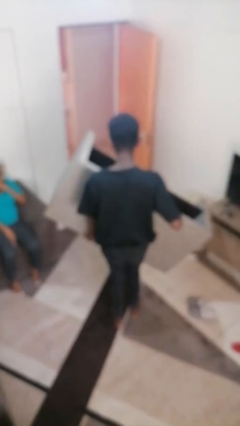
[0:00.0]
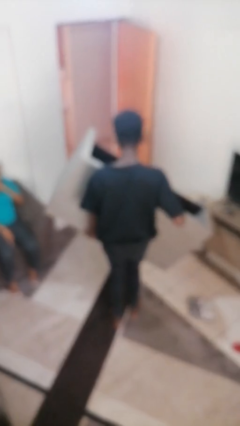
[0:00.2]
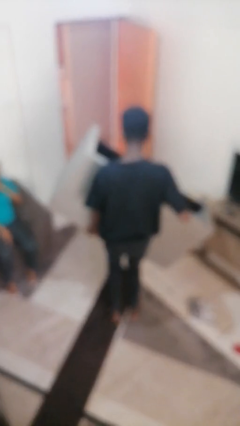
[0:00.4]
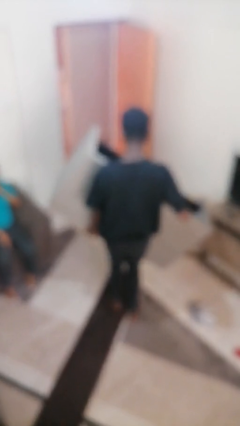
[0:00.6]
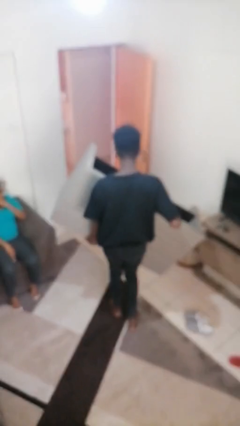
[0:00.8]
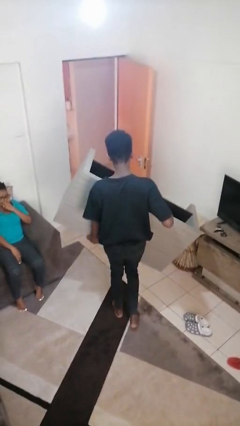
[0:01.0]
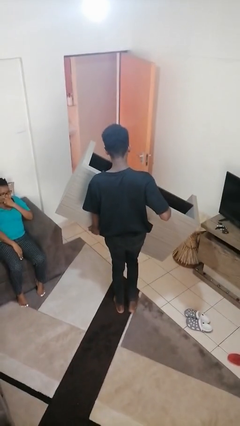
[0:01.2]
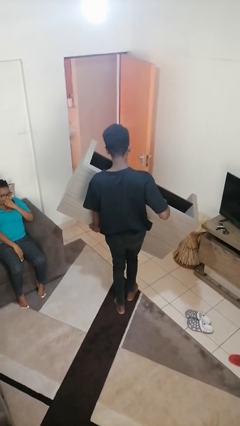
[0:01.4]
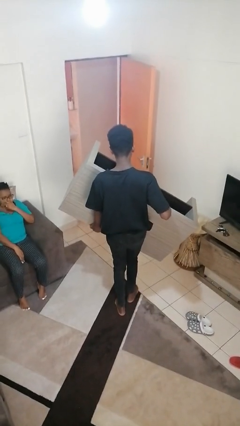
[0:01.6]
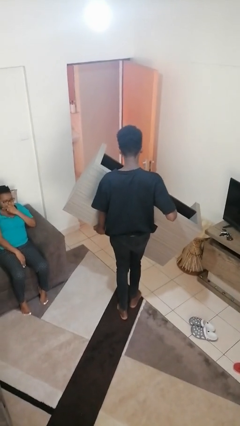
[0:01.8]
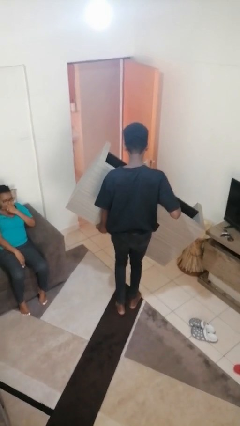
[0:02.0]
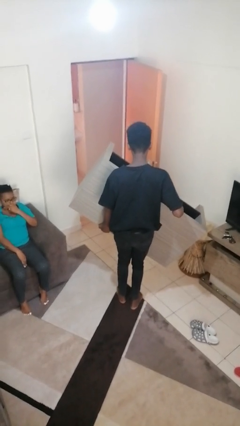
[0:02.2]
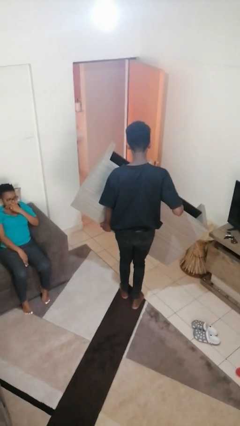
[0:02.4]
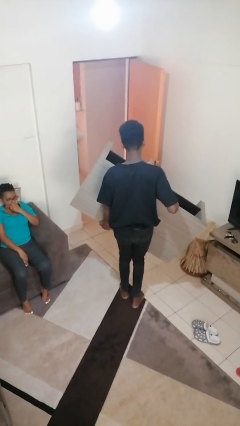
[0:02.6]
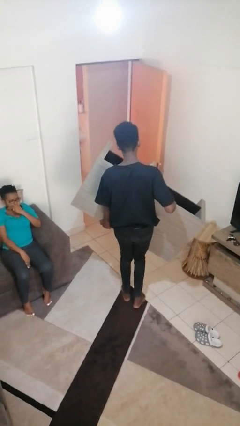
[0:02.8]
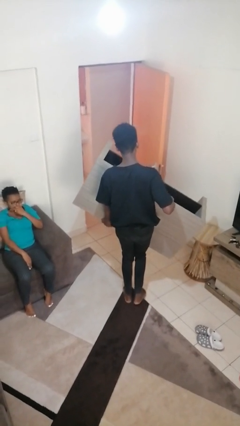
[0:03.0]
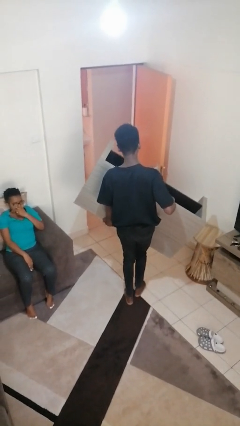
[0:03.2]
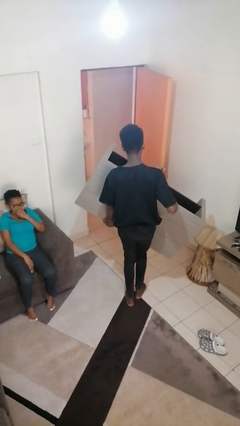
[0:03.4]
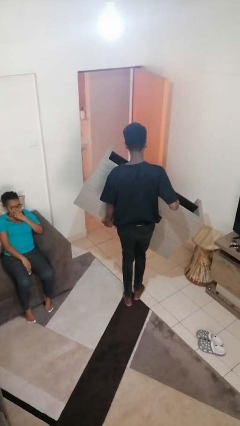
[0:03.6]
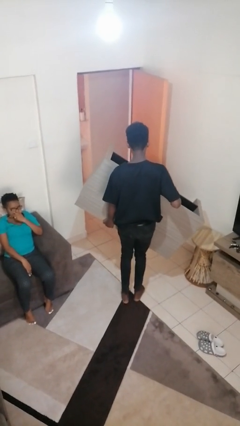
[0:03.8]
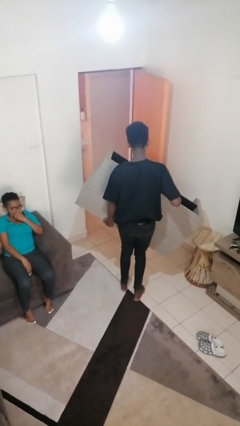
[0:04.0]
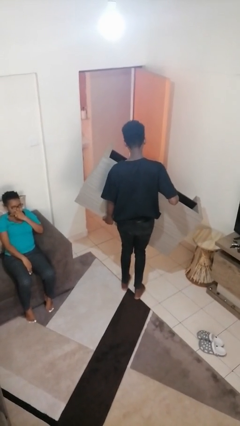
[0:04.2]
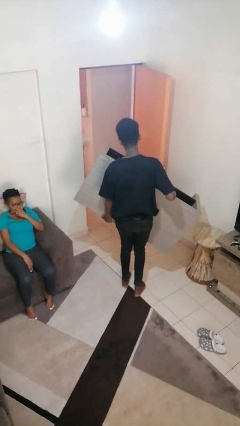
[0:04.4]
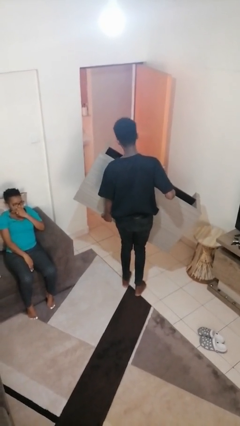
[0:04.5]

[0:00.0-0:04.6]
person carries furniture

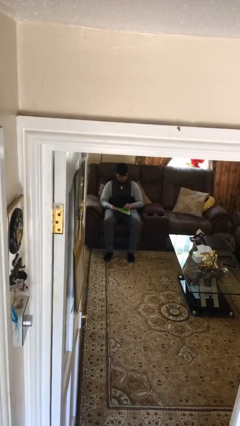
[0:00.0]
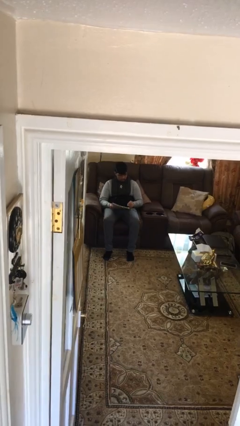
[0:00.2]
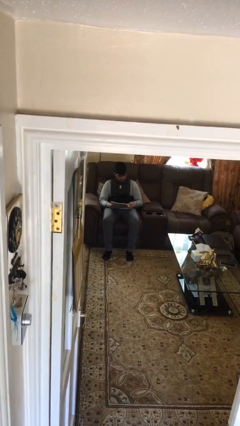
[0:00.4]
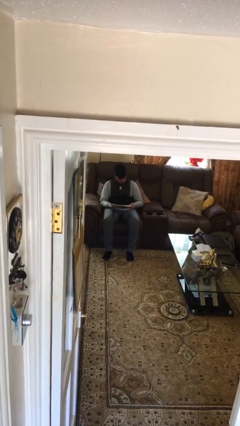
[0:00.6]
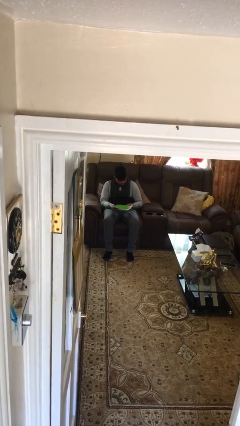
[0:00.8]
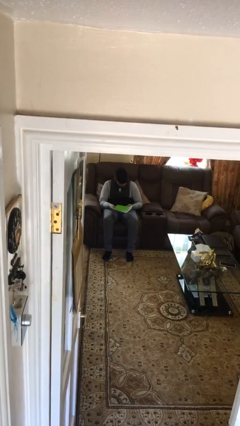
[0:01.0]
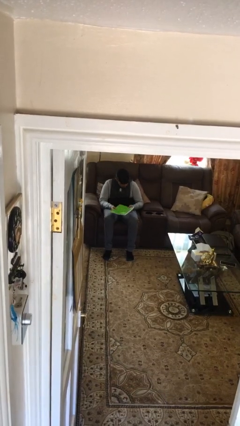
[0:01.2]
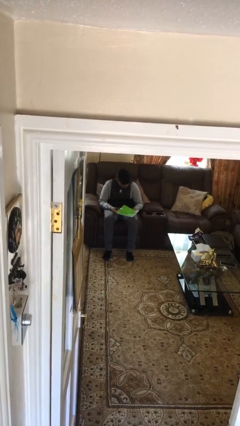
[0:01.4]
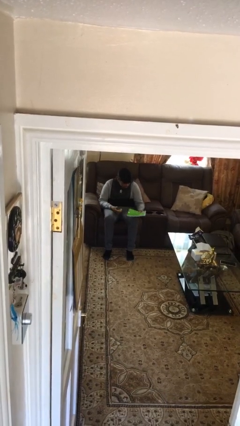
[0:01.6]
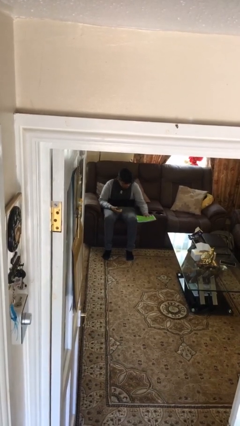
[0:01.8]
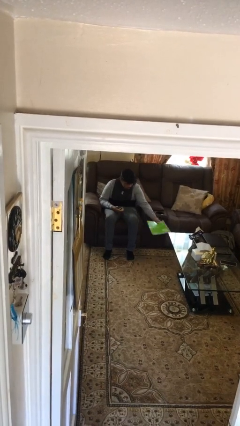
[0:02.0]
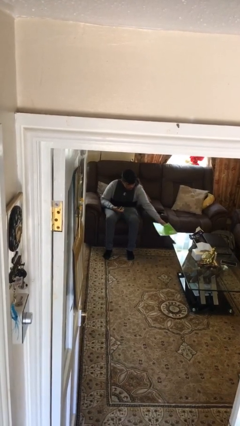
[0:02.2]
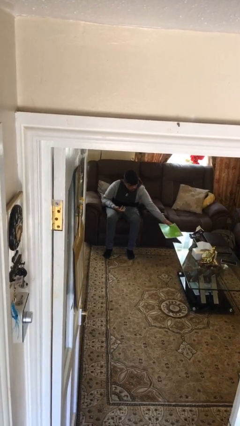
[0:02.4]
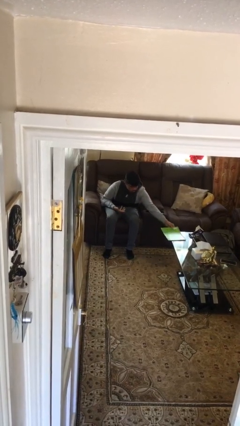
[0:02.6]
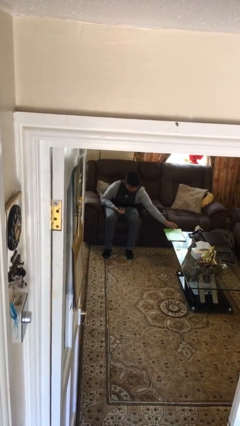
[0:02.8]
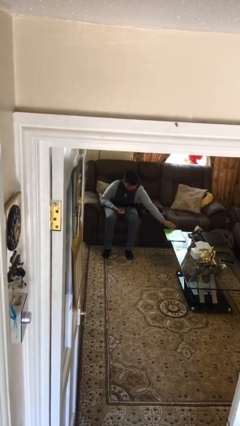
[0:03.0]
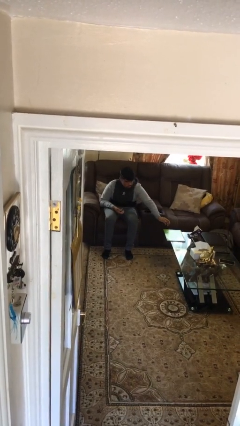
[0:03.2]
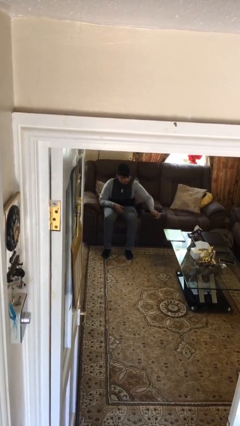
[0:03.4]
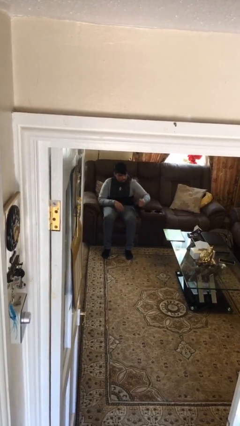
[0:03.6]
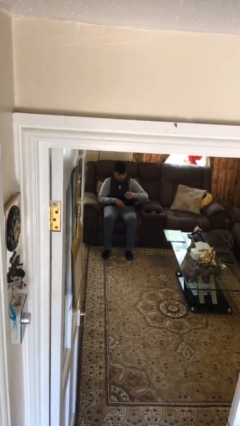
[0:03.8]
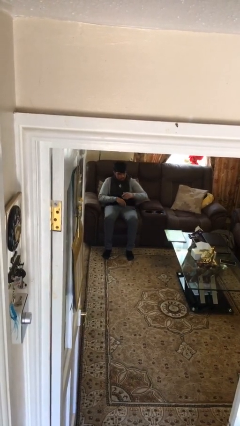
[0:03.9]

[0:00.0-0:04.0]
person puts down object on table

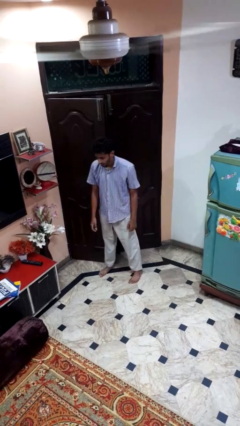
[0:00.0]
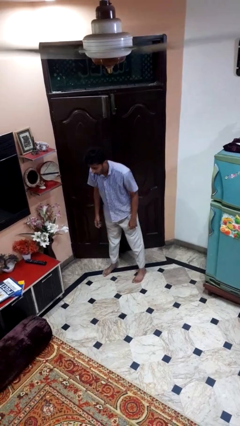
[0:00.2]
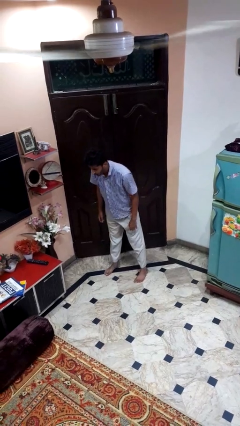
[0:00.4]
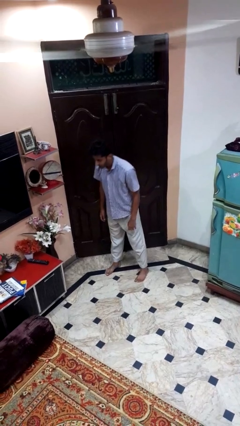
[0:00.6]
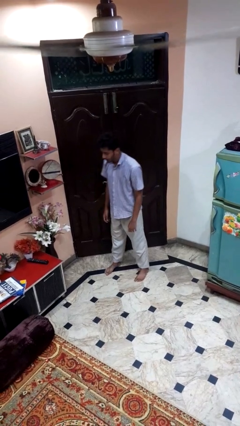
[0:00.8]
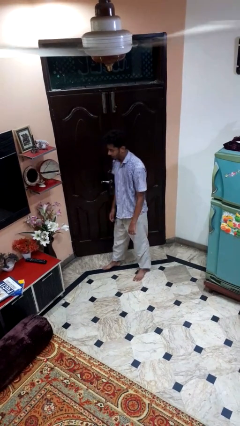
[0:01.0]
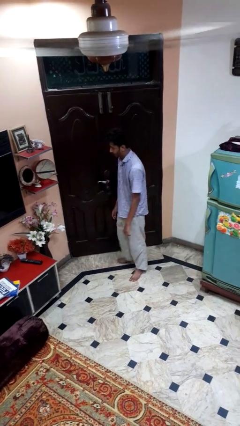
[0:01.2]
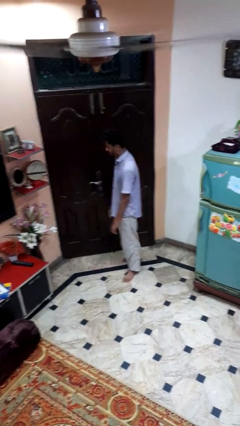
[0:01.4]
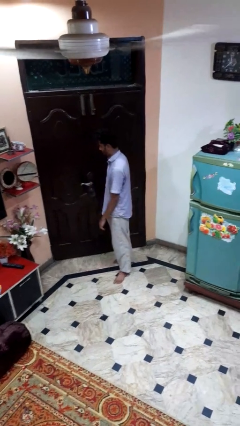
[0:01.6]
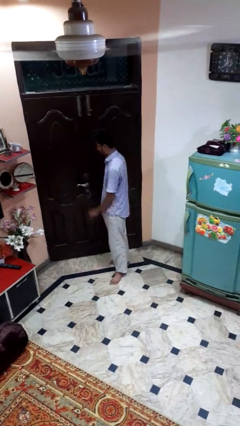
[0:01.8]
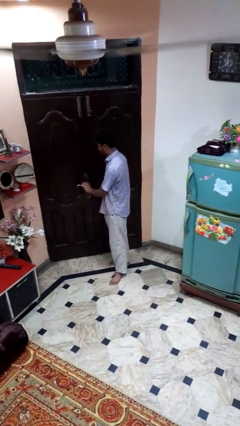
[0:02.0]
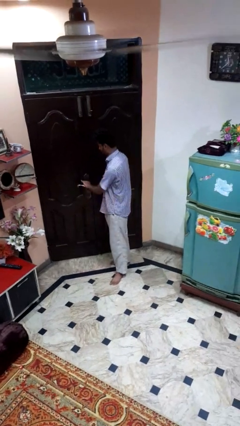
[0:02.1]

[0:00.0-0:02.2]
person closes door with hip

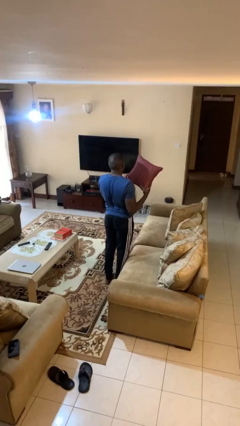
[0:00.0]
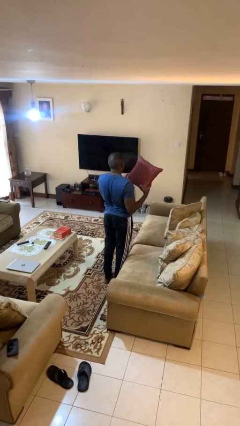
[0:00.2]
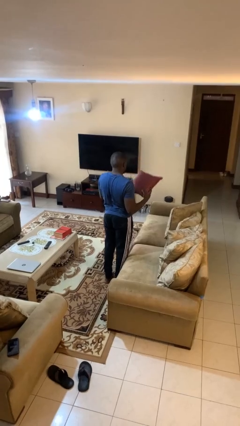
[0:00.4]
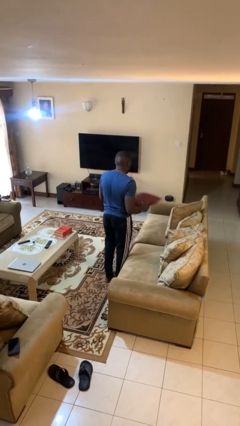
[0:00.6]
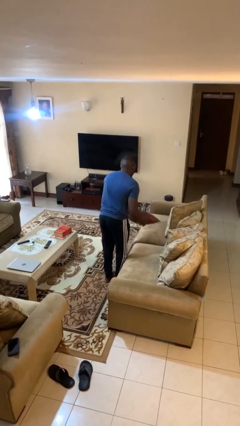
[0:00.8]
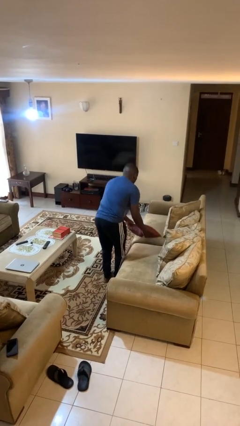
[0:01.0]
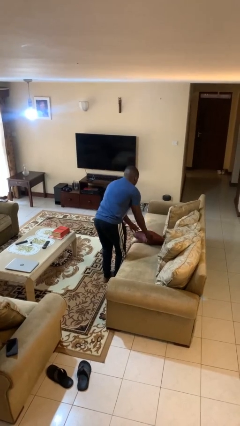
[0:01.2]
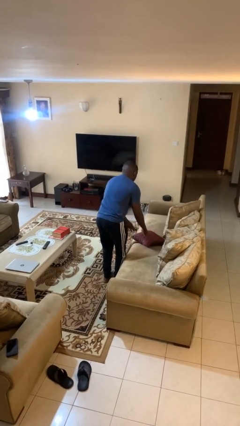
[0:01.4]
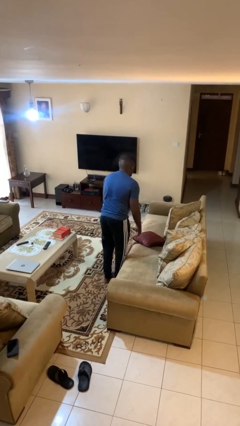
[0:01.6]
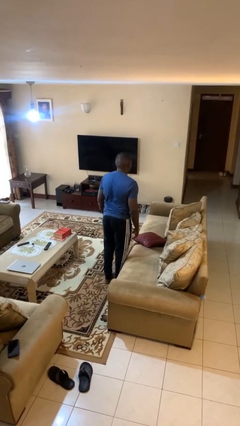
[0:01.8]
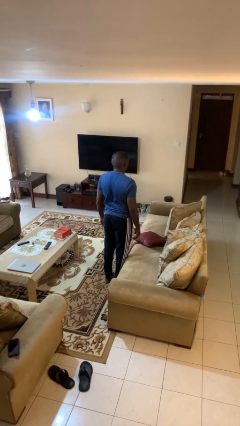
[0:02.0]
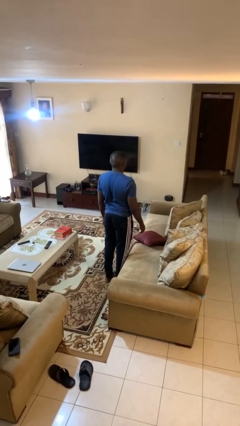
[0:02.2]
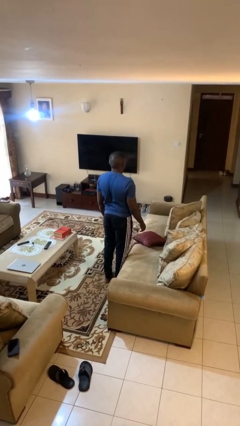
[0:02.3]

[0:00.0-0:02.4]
person puts down object on couch

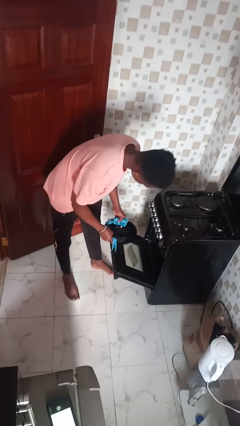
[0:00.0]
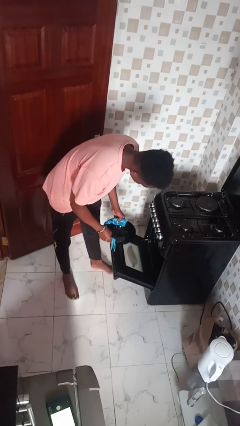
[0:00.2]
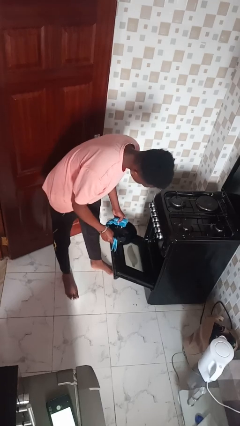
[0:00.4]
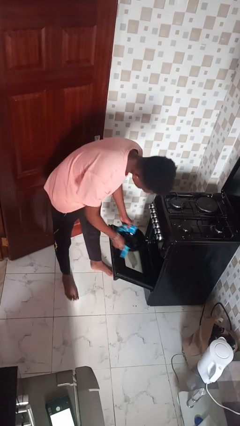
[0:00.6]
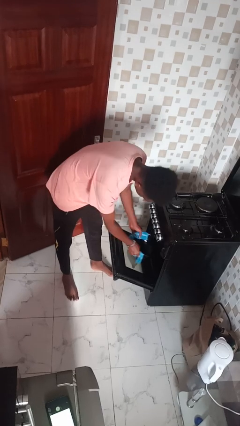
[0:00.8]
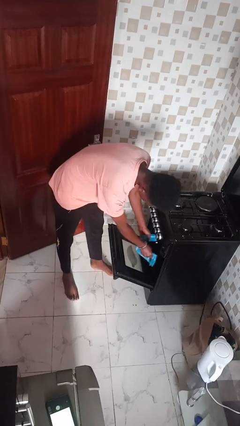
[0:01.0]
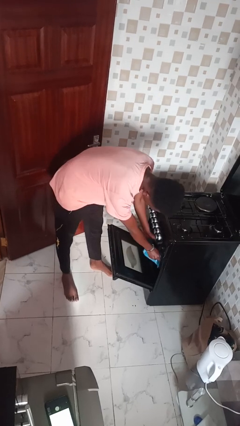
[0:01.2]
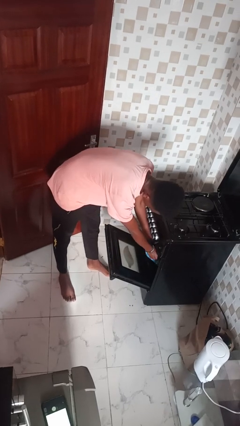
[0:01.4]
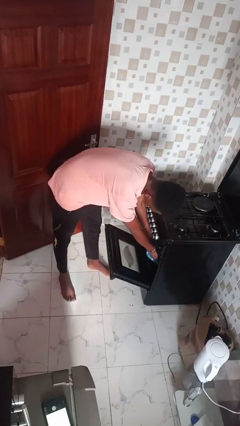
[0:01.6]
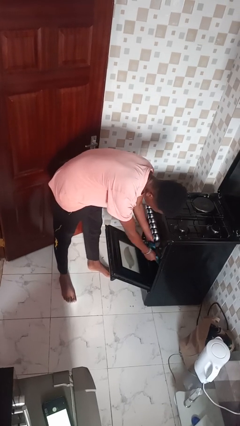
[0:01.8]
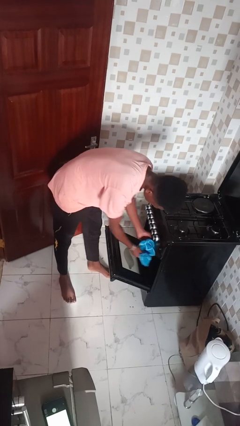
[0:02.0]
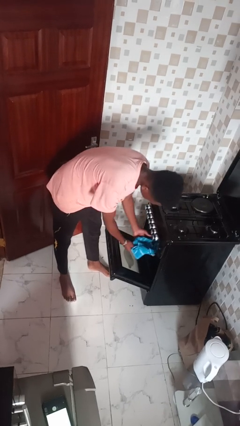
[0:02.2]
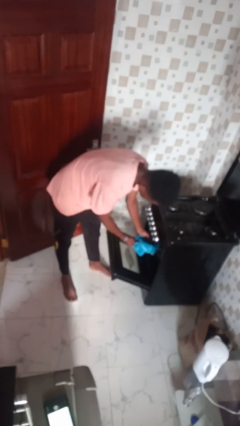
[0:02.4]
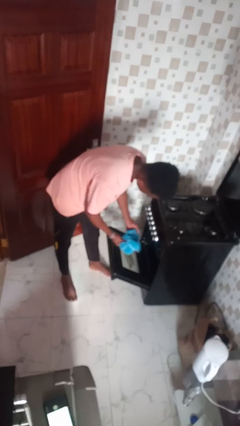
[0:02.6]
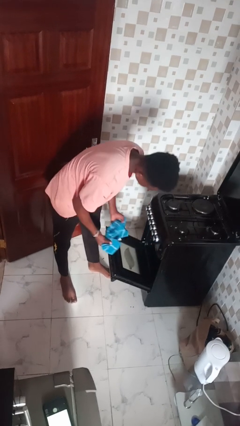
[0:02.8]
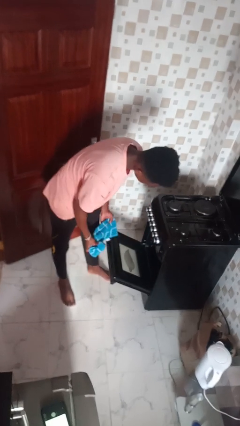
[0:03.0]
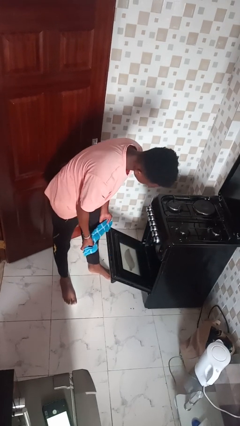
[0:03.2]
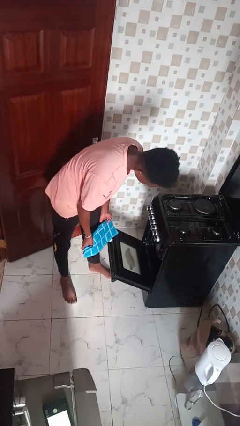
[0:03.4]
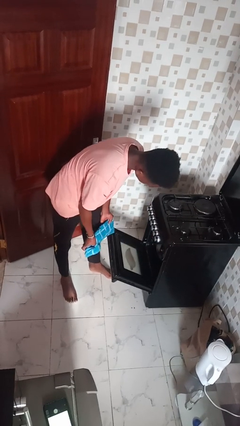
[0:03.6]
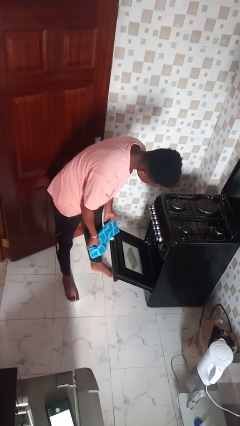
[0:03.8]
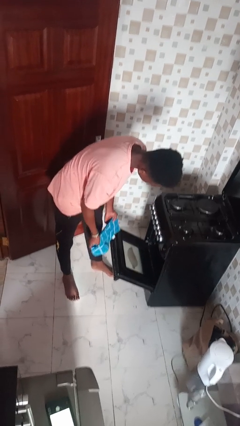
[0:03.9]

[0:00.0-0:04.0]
person puts object into oven

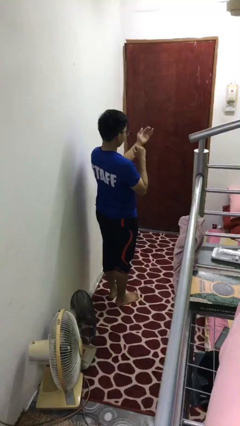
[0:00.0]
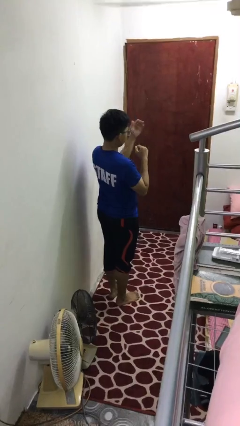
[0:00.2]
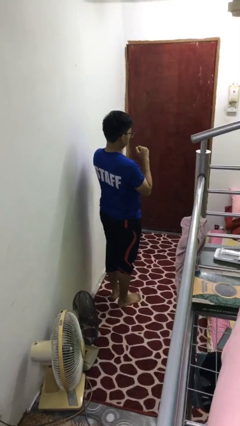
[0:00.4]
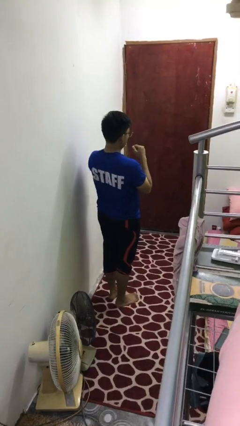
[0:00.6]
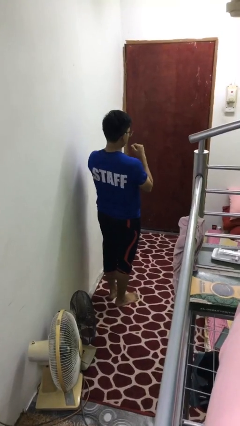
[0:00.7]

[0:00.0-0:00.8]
person karate chop
